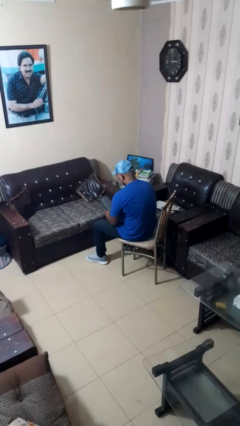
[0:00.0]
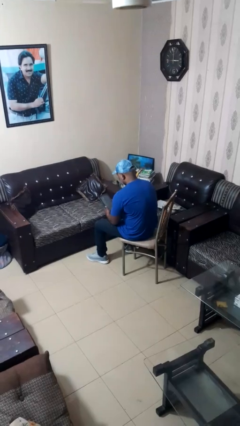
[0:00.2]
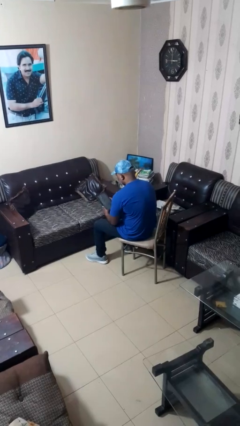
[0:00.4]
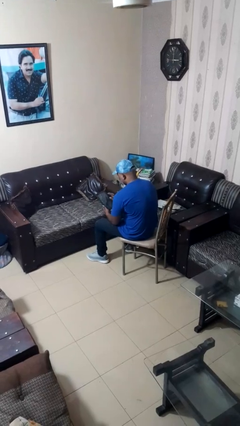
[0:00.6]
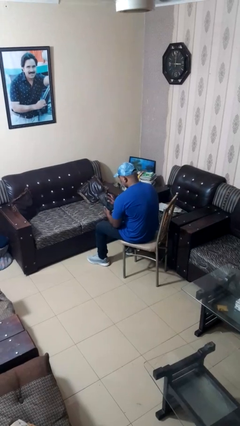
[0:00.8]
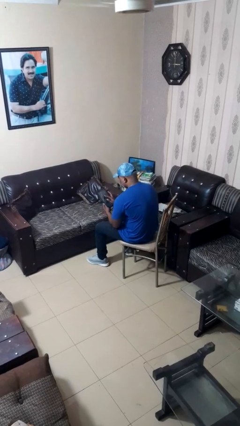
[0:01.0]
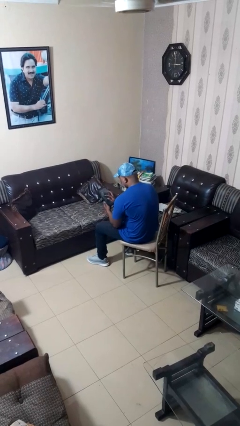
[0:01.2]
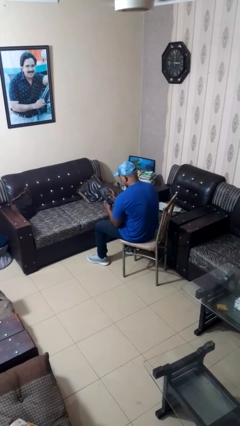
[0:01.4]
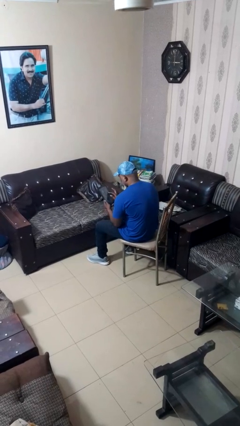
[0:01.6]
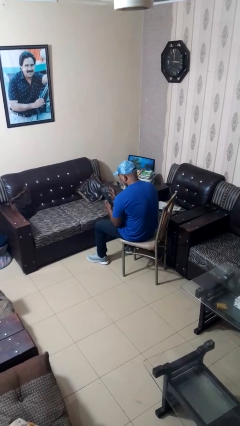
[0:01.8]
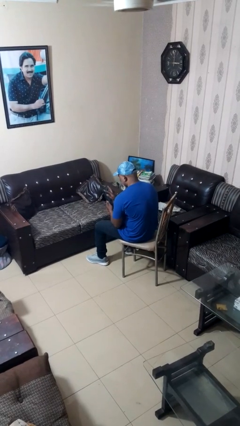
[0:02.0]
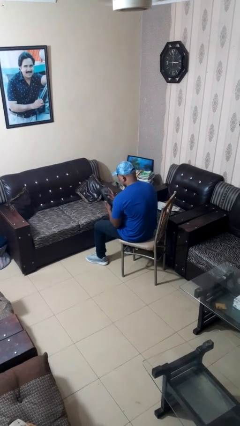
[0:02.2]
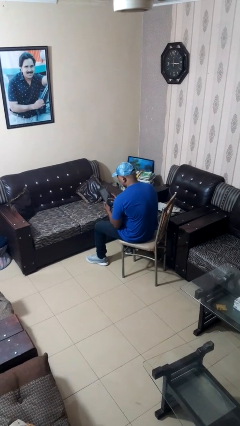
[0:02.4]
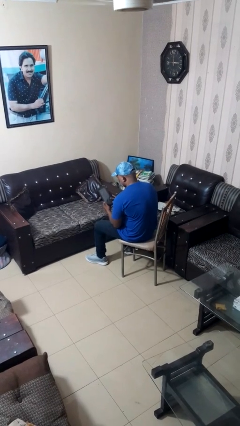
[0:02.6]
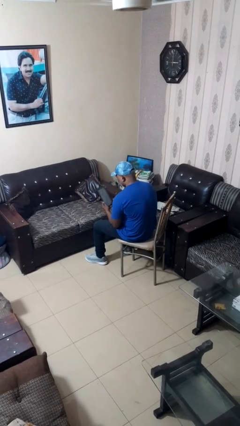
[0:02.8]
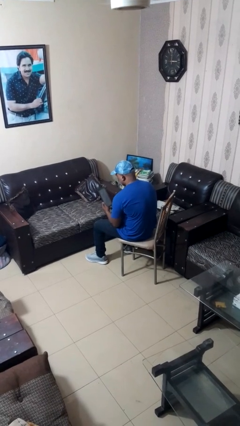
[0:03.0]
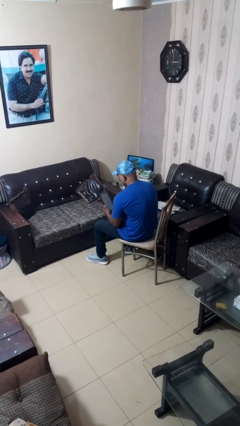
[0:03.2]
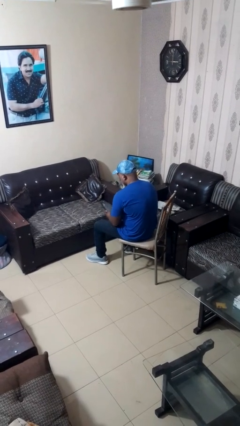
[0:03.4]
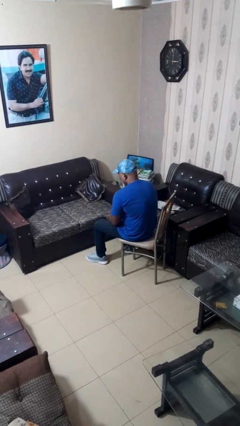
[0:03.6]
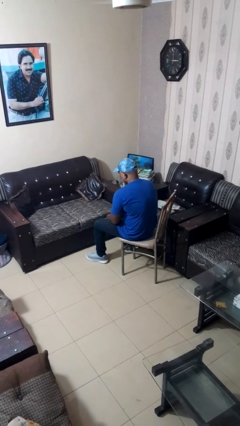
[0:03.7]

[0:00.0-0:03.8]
person interacts with tablet

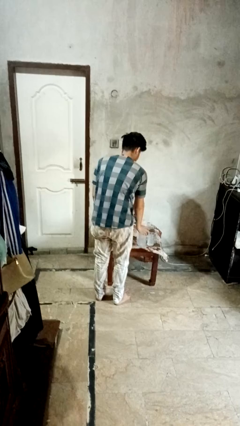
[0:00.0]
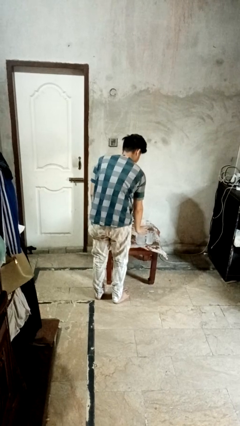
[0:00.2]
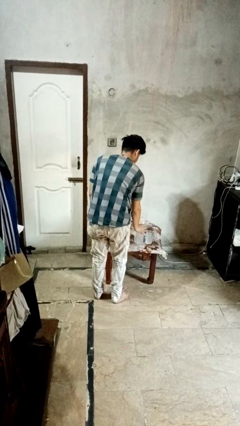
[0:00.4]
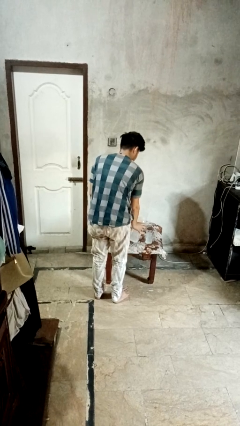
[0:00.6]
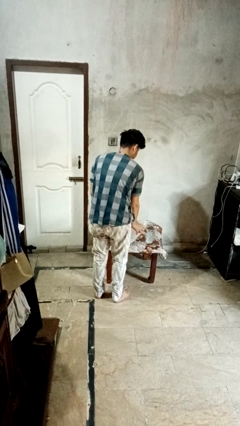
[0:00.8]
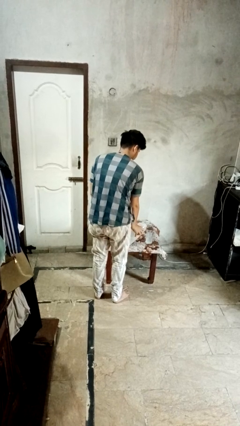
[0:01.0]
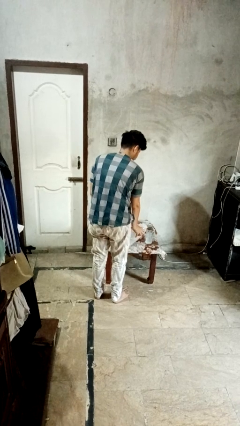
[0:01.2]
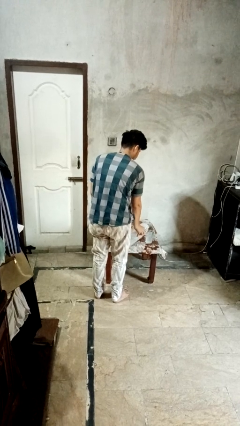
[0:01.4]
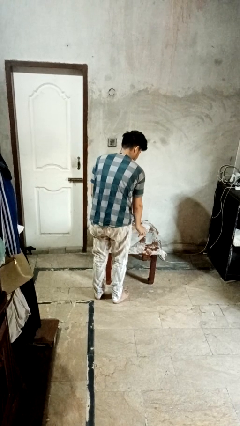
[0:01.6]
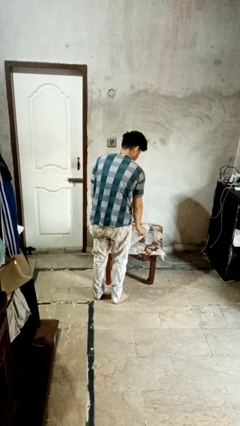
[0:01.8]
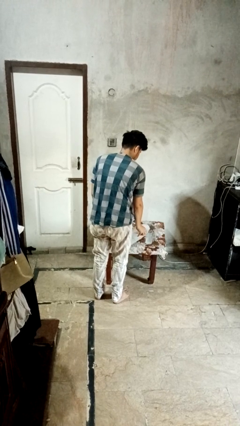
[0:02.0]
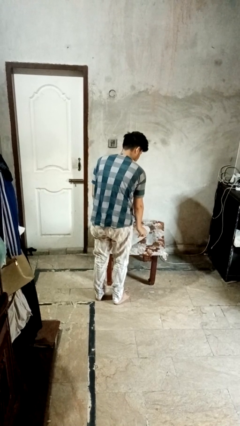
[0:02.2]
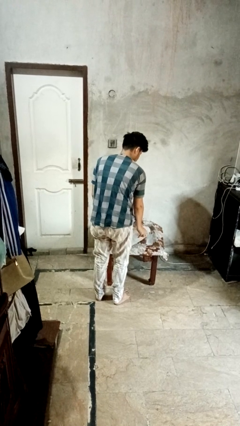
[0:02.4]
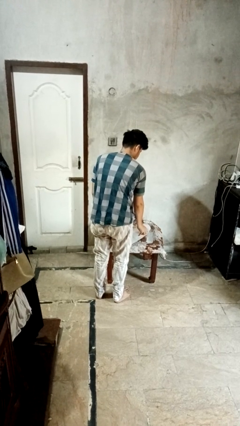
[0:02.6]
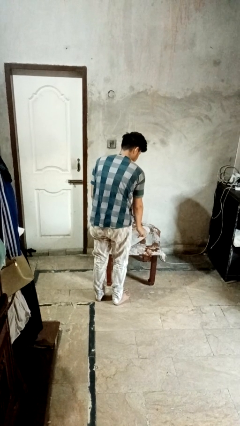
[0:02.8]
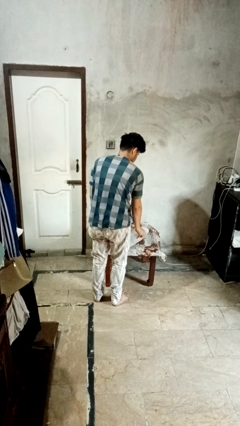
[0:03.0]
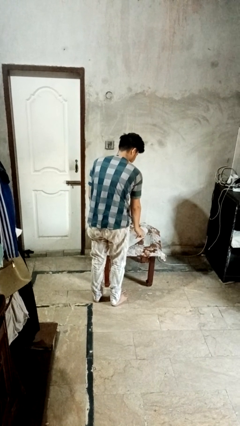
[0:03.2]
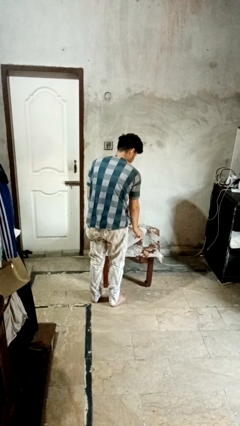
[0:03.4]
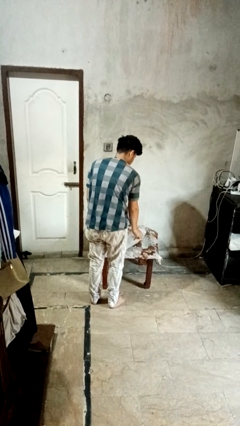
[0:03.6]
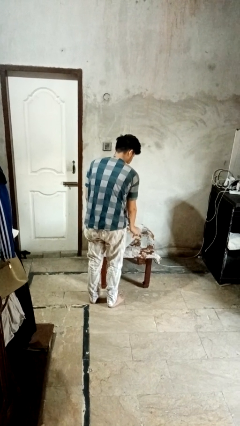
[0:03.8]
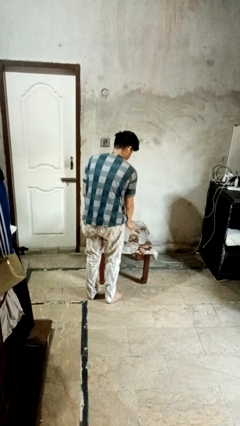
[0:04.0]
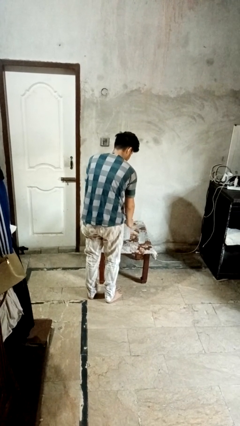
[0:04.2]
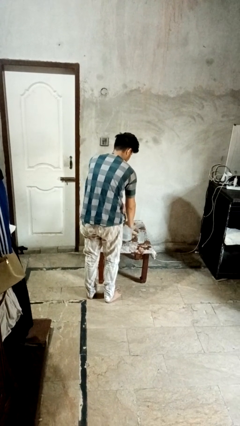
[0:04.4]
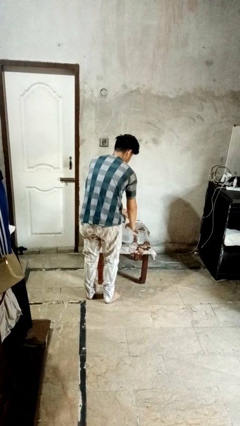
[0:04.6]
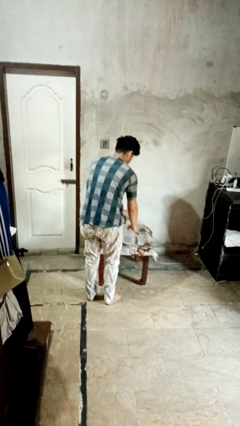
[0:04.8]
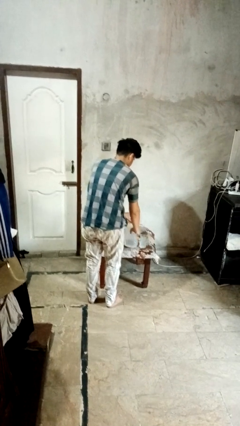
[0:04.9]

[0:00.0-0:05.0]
person pours liquid into cup

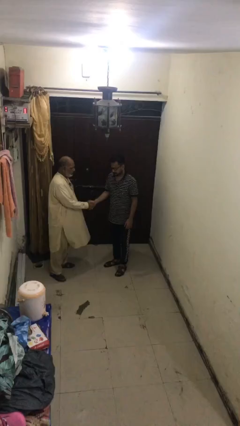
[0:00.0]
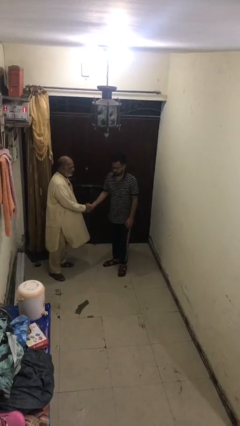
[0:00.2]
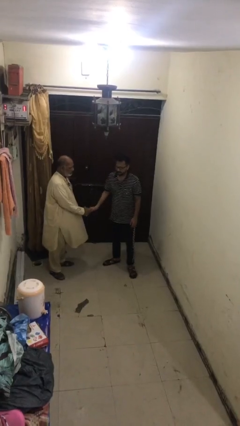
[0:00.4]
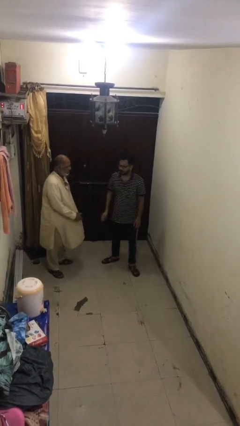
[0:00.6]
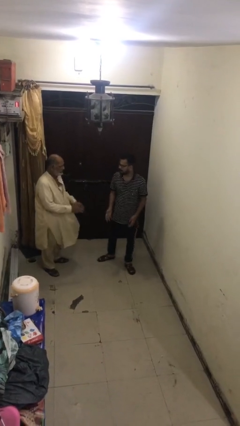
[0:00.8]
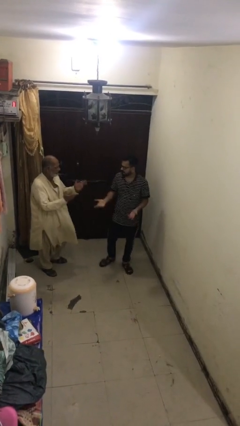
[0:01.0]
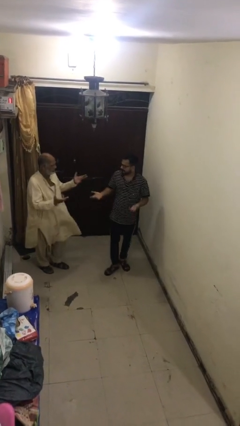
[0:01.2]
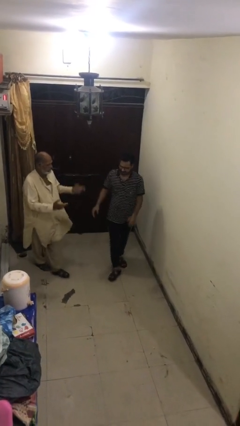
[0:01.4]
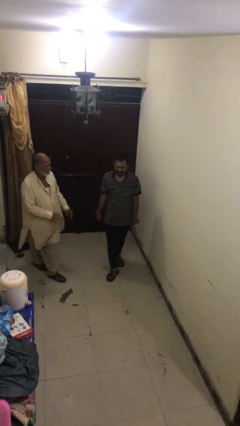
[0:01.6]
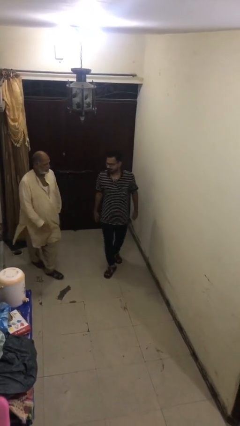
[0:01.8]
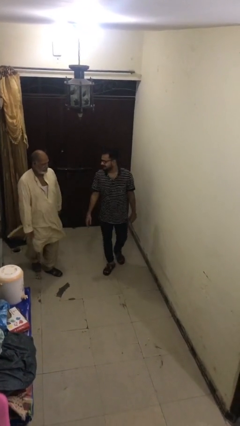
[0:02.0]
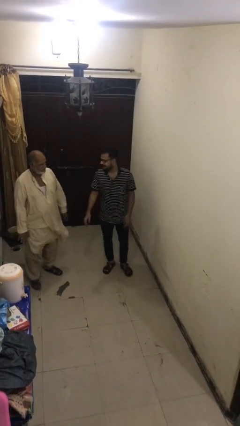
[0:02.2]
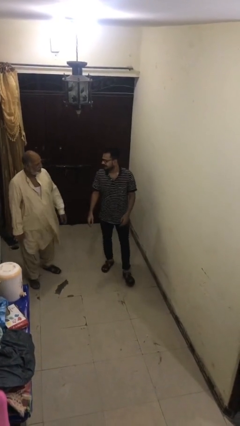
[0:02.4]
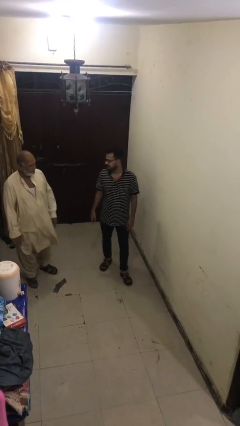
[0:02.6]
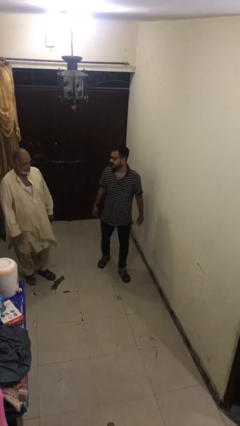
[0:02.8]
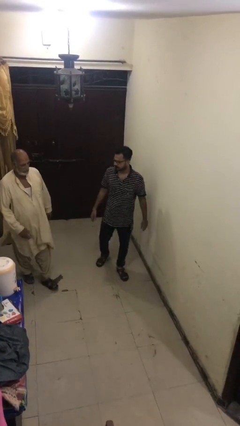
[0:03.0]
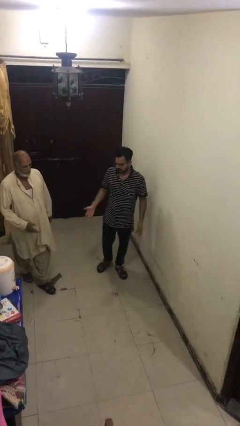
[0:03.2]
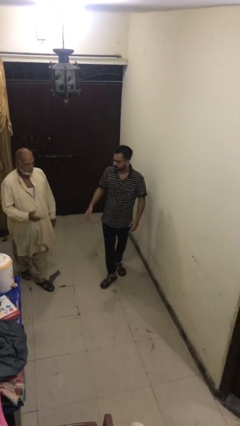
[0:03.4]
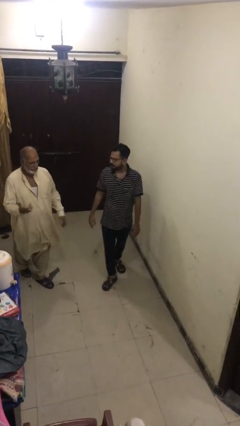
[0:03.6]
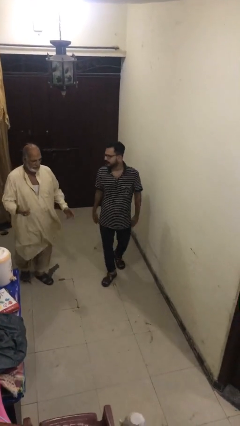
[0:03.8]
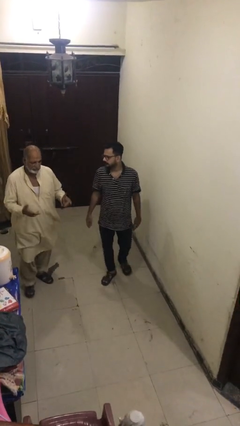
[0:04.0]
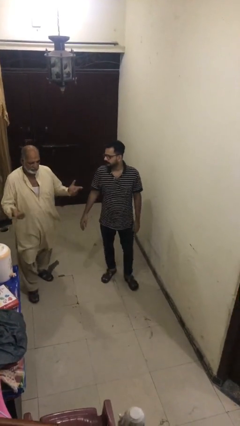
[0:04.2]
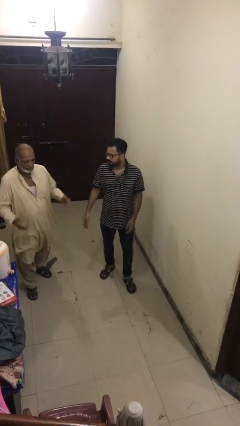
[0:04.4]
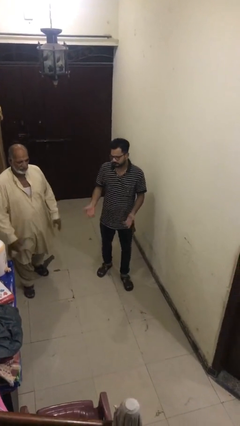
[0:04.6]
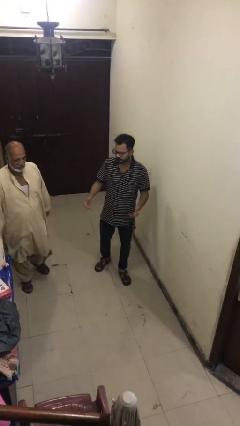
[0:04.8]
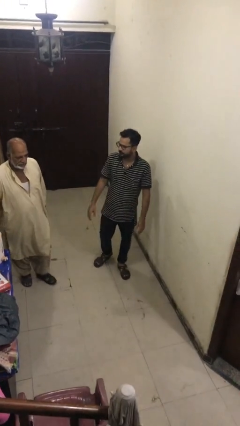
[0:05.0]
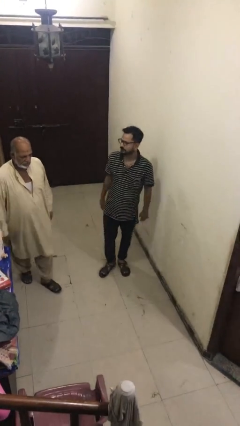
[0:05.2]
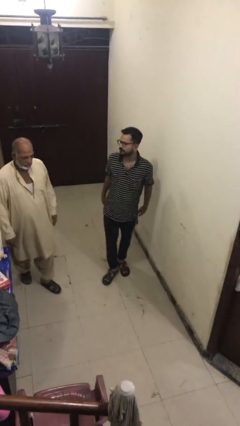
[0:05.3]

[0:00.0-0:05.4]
person talks to person

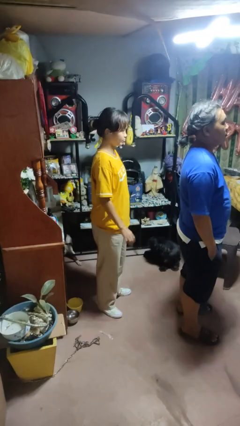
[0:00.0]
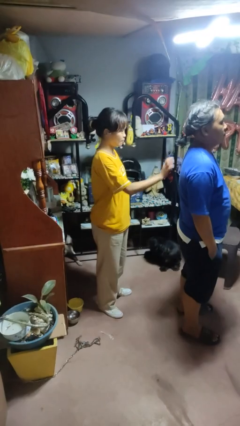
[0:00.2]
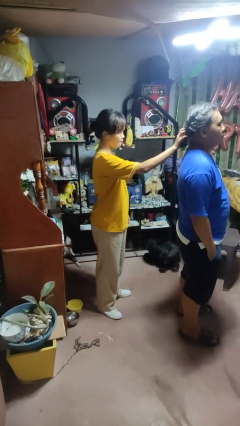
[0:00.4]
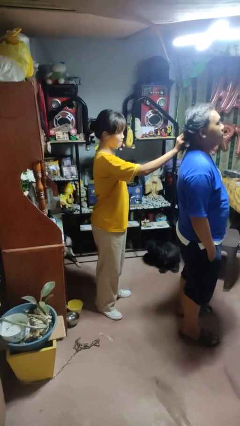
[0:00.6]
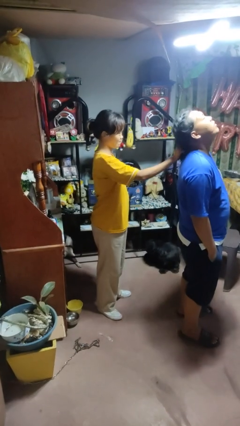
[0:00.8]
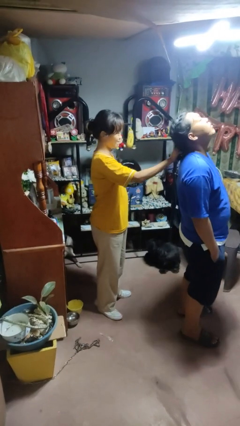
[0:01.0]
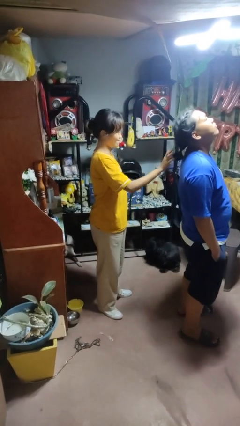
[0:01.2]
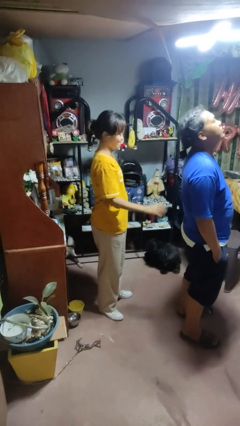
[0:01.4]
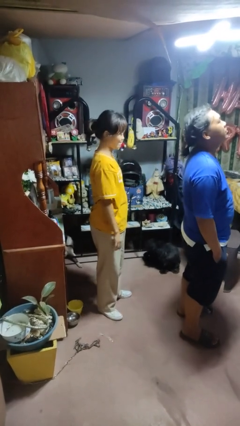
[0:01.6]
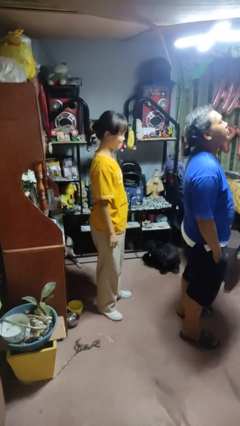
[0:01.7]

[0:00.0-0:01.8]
person grabs person by hair

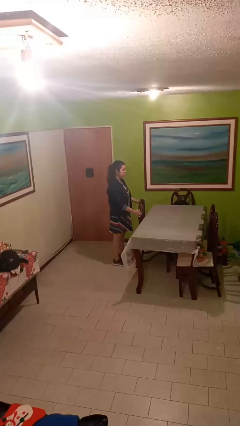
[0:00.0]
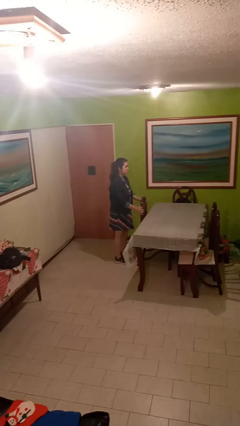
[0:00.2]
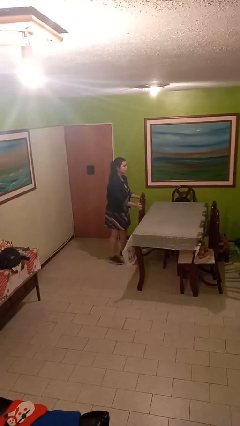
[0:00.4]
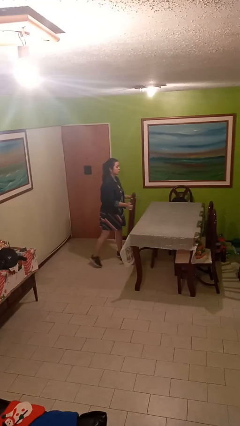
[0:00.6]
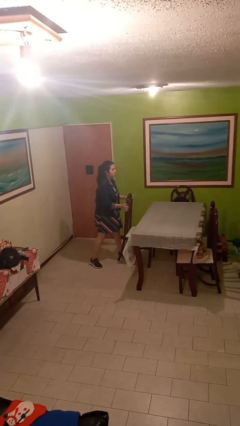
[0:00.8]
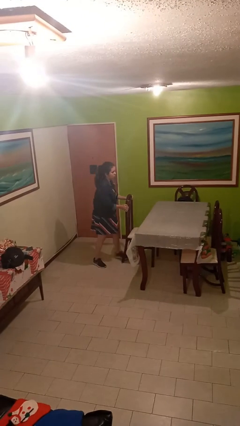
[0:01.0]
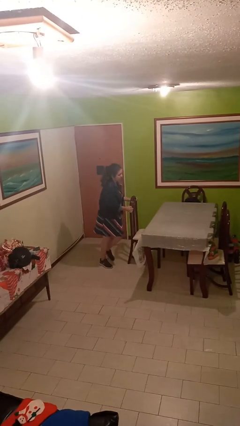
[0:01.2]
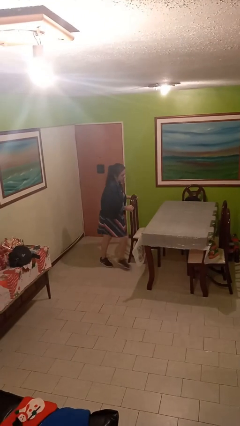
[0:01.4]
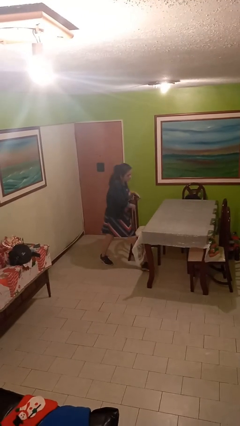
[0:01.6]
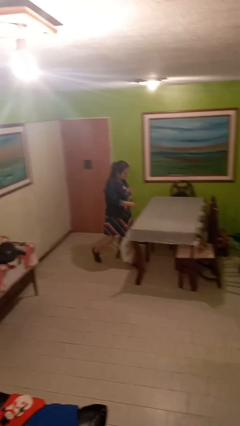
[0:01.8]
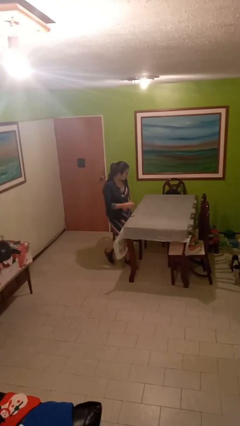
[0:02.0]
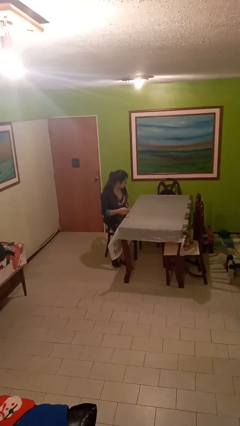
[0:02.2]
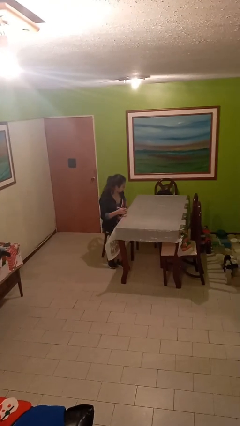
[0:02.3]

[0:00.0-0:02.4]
person stands up
